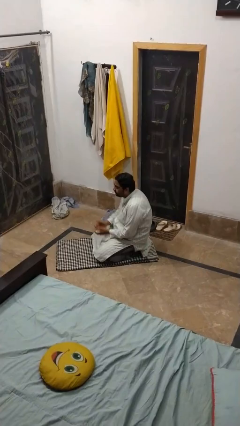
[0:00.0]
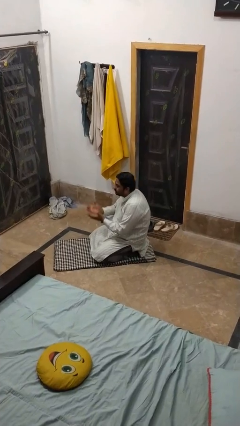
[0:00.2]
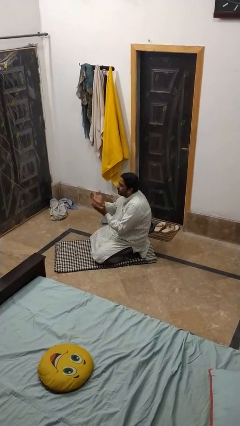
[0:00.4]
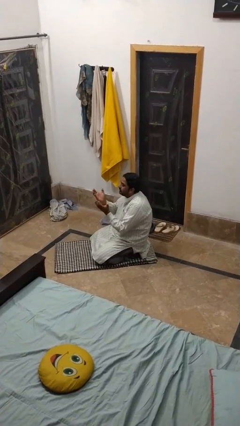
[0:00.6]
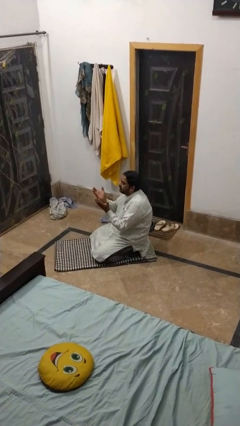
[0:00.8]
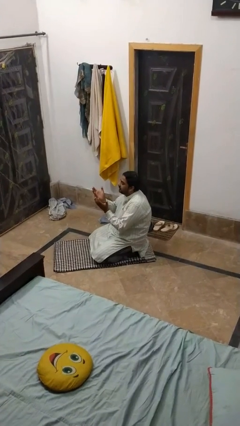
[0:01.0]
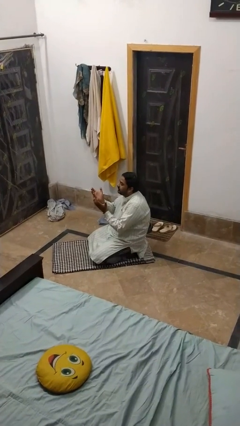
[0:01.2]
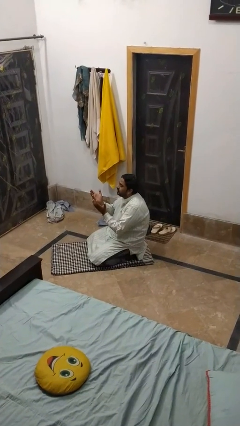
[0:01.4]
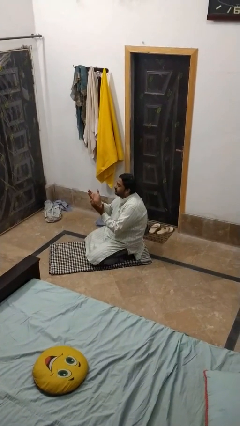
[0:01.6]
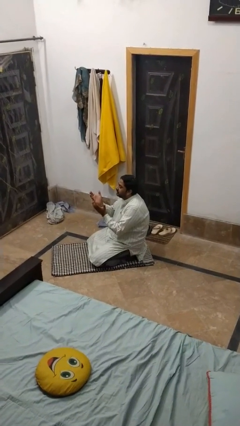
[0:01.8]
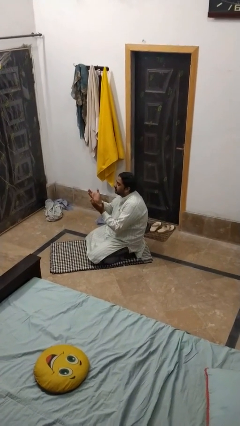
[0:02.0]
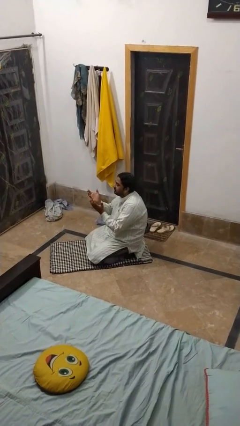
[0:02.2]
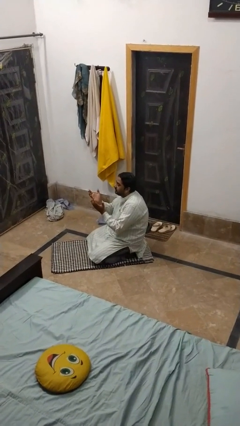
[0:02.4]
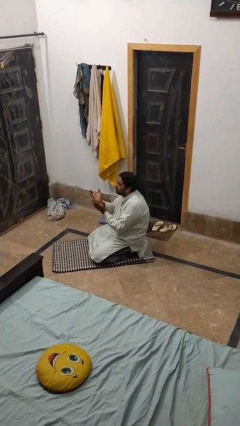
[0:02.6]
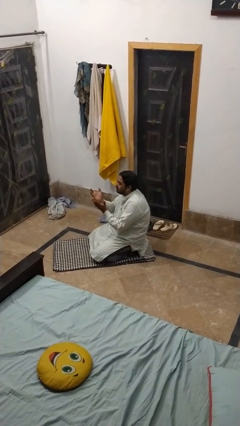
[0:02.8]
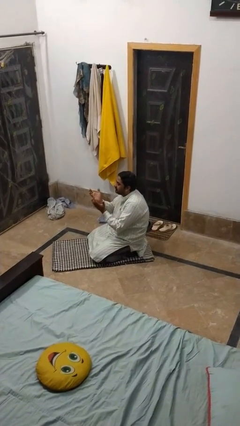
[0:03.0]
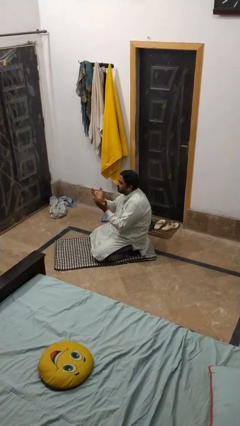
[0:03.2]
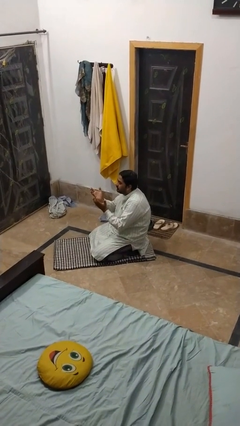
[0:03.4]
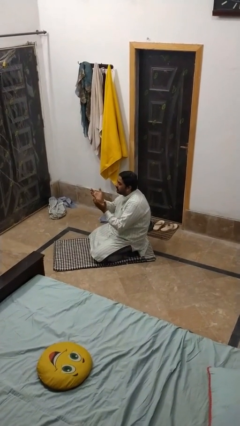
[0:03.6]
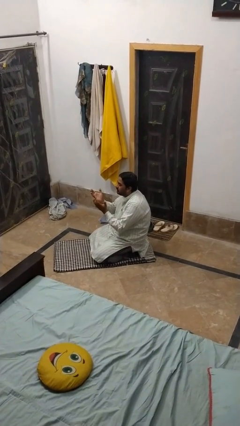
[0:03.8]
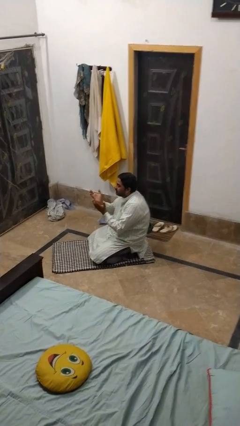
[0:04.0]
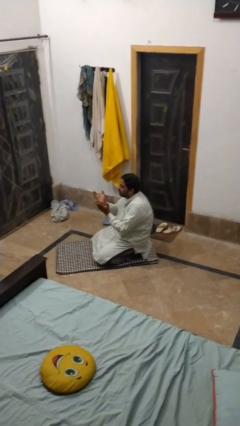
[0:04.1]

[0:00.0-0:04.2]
person prays

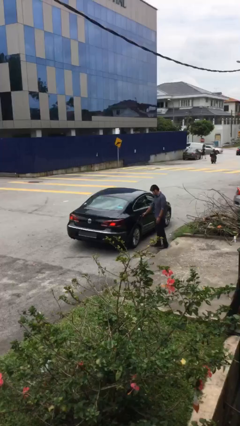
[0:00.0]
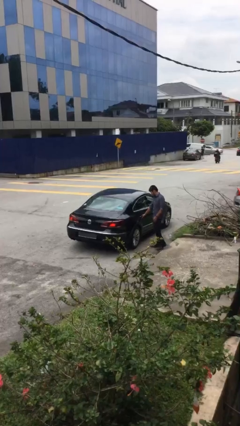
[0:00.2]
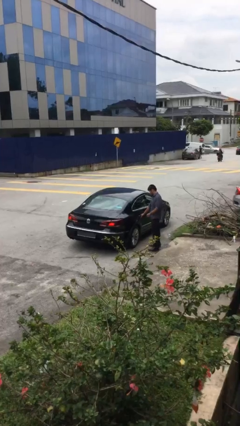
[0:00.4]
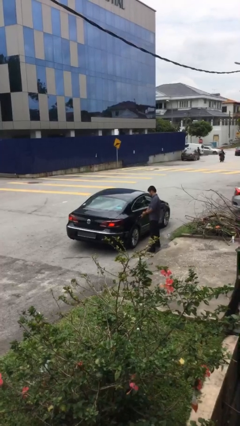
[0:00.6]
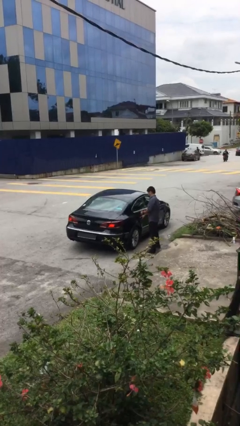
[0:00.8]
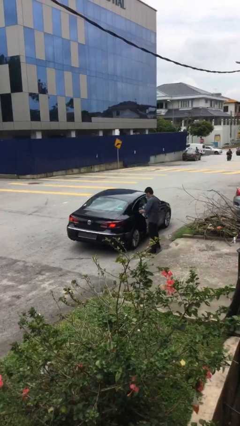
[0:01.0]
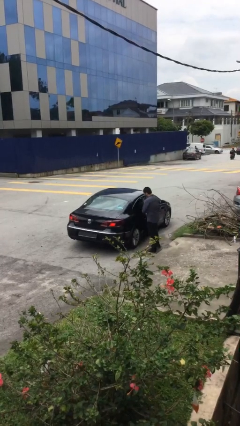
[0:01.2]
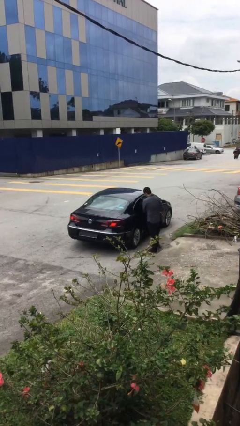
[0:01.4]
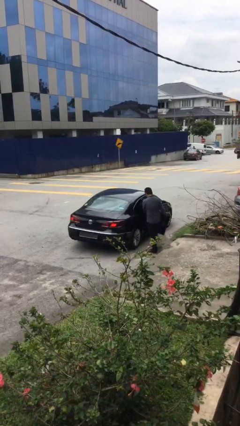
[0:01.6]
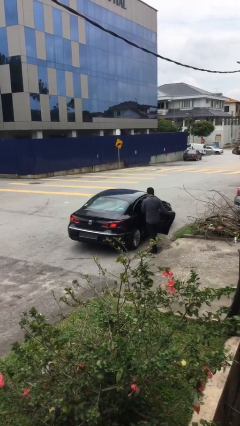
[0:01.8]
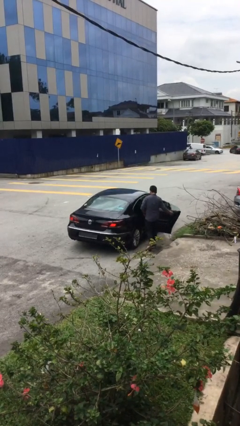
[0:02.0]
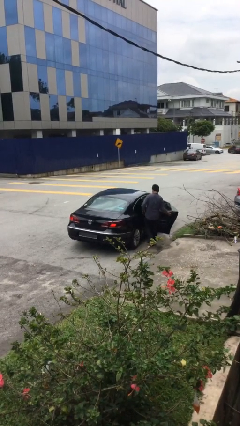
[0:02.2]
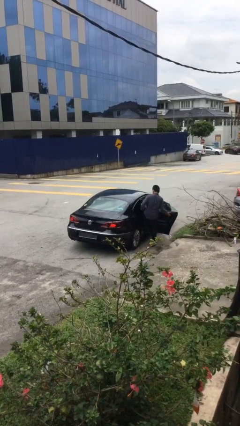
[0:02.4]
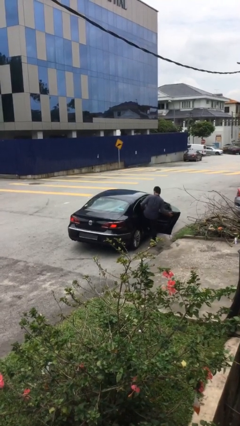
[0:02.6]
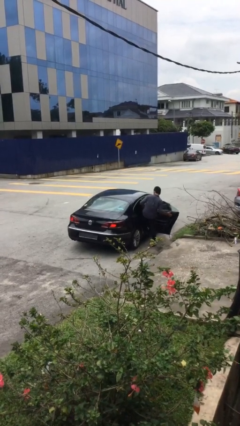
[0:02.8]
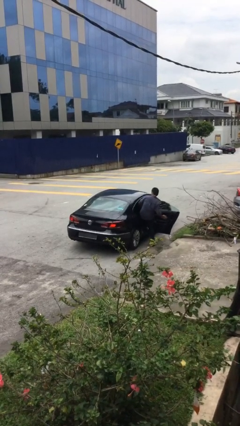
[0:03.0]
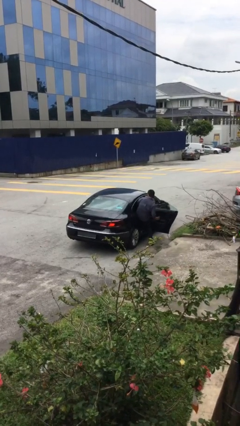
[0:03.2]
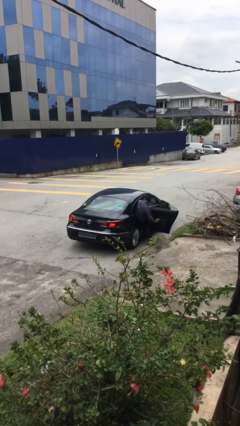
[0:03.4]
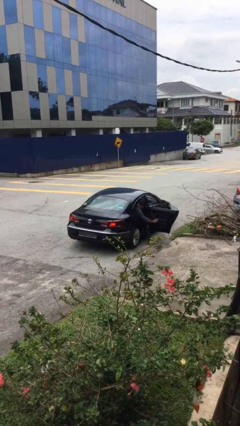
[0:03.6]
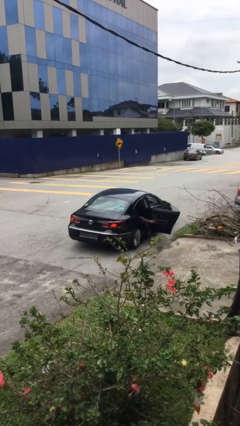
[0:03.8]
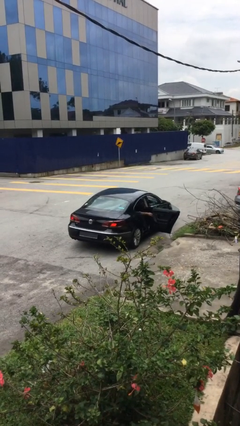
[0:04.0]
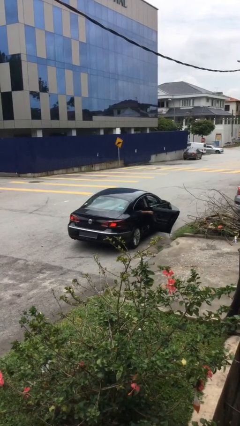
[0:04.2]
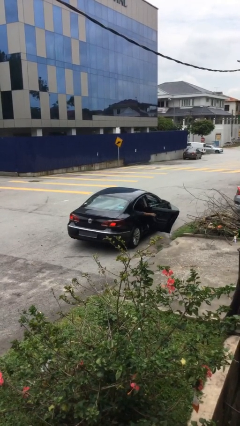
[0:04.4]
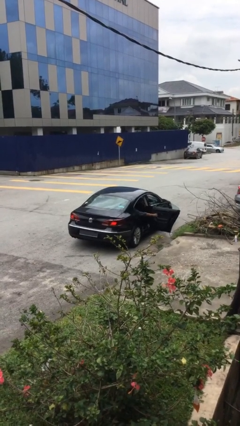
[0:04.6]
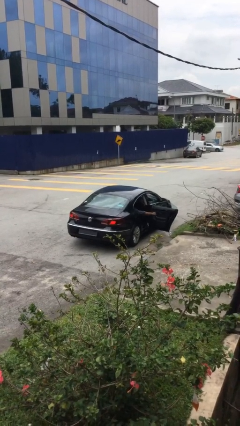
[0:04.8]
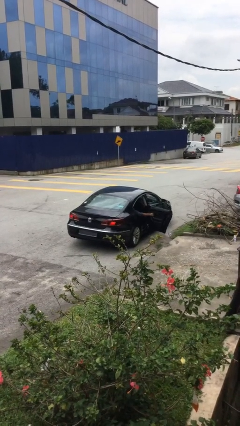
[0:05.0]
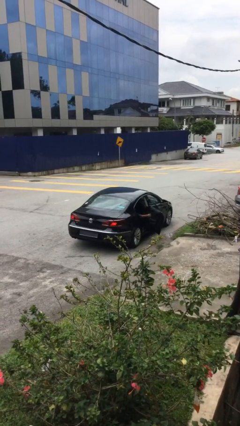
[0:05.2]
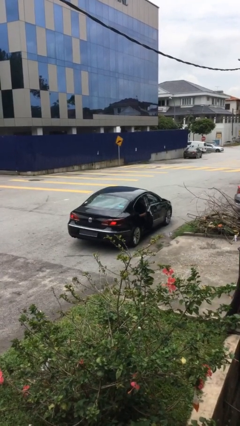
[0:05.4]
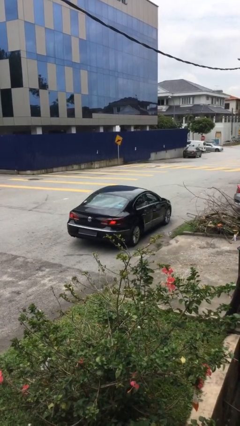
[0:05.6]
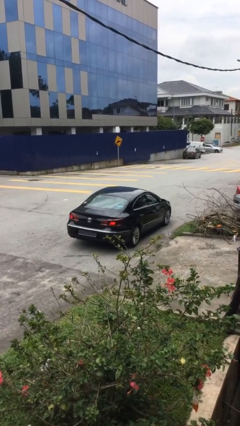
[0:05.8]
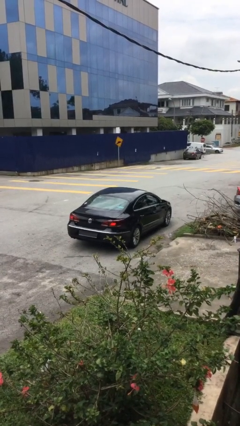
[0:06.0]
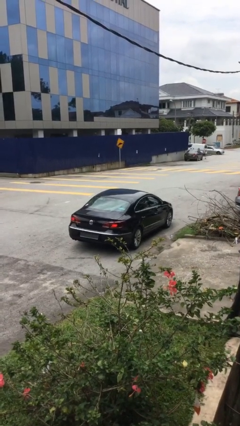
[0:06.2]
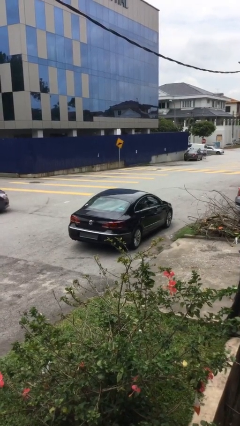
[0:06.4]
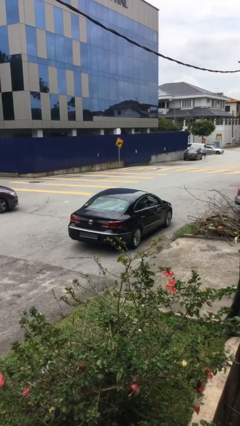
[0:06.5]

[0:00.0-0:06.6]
car picks up person

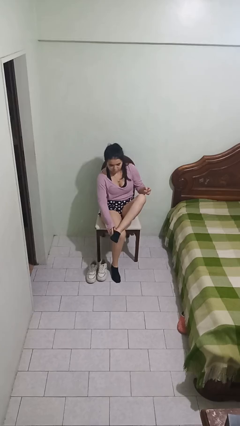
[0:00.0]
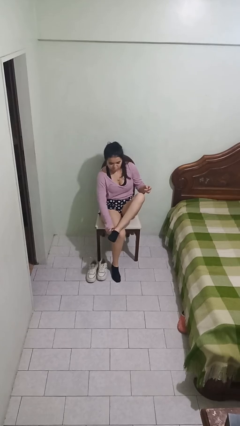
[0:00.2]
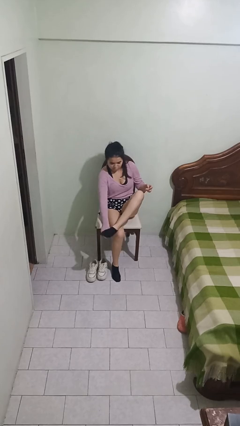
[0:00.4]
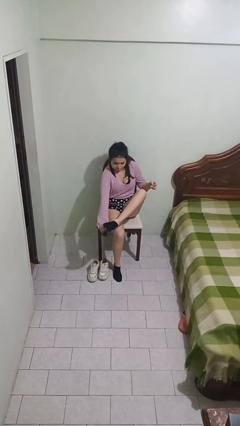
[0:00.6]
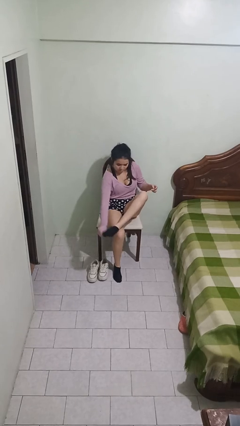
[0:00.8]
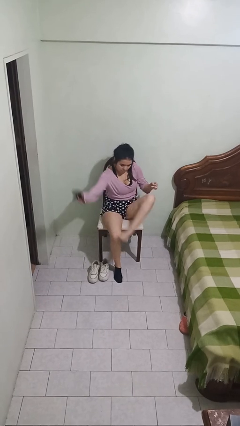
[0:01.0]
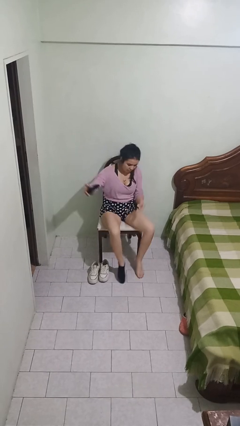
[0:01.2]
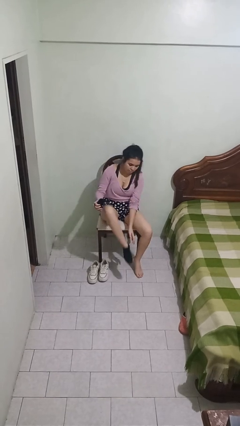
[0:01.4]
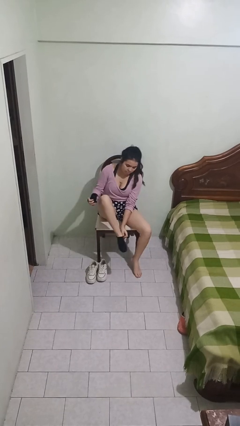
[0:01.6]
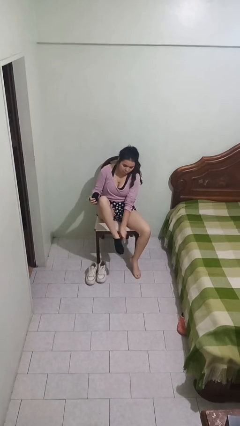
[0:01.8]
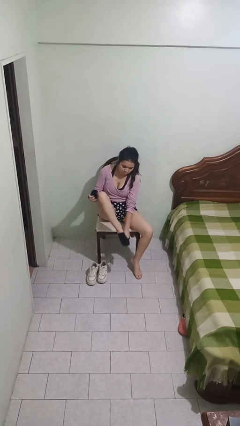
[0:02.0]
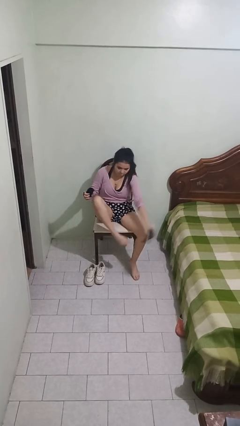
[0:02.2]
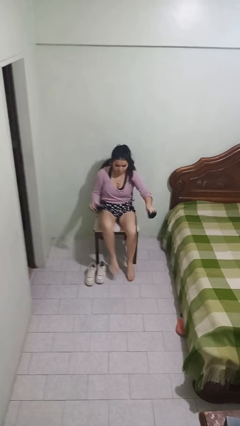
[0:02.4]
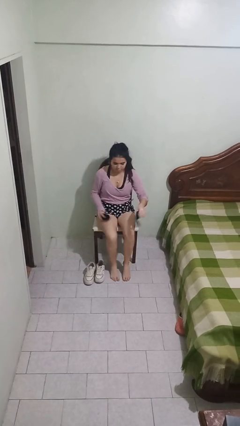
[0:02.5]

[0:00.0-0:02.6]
person takes off socks

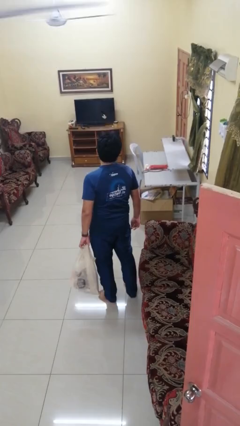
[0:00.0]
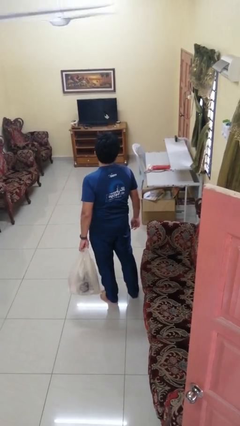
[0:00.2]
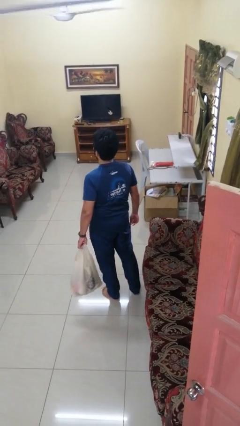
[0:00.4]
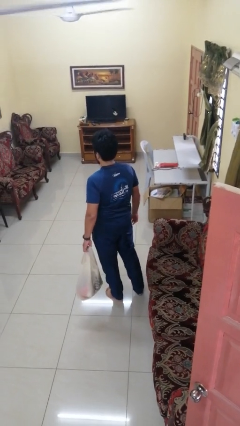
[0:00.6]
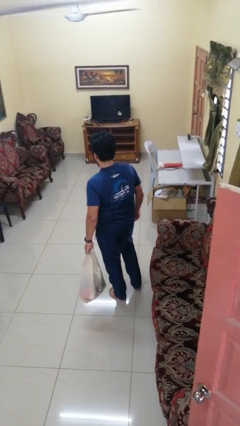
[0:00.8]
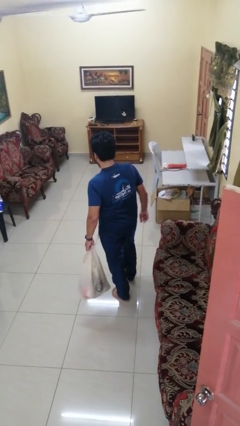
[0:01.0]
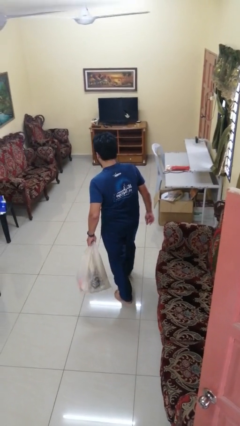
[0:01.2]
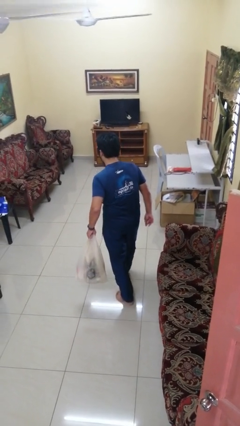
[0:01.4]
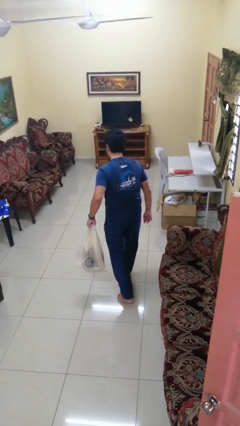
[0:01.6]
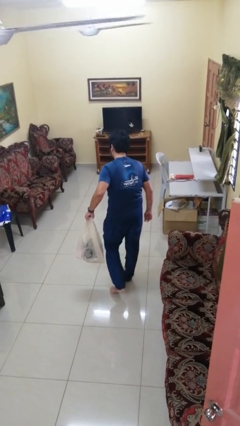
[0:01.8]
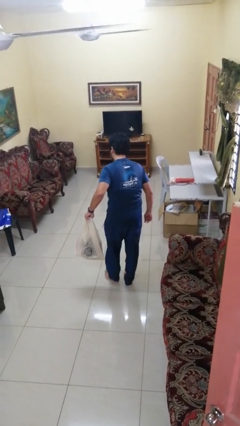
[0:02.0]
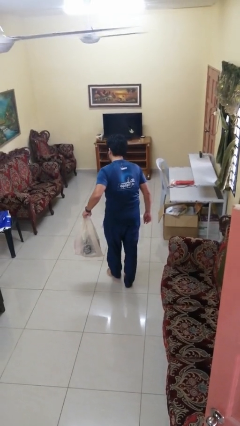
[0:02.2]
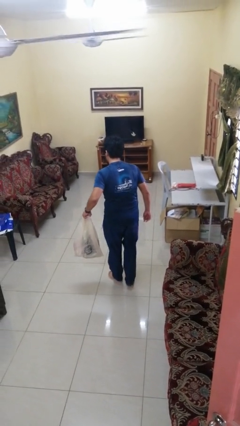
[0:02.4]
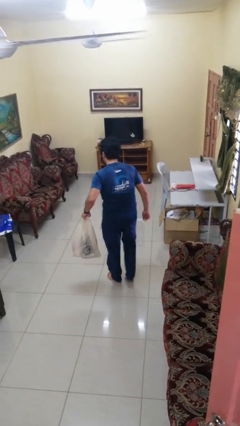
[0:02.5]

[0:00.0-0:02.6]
person carries groceries

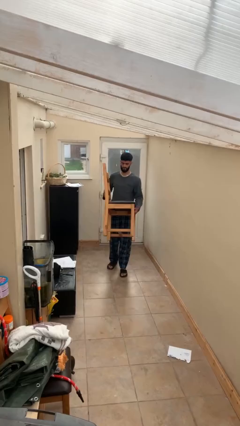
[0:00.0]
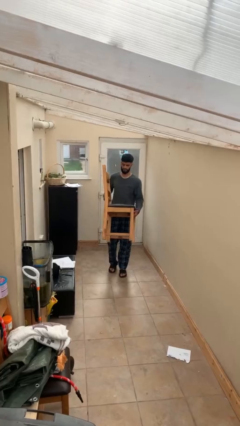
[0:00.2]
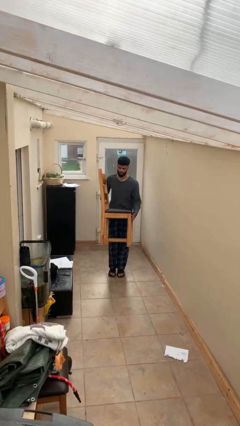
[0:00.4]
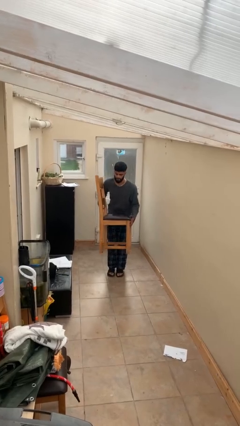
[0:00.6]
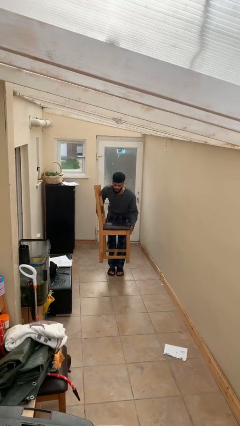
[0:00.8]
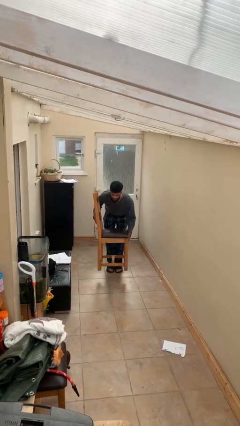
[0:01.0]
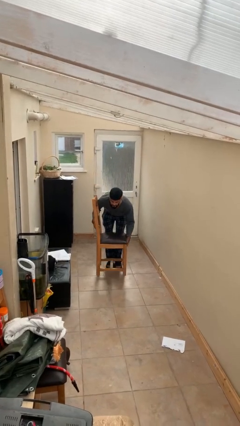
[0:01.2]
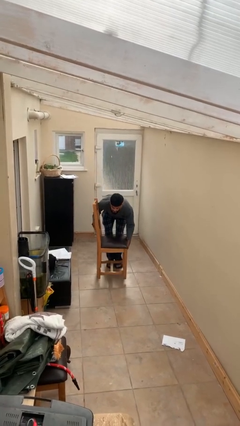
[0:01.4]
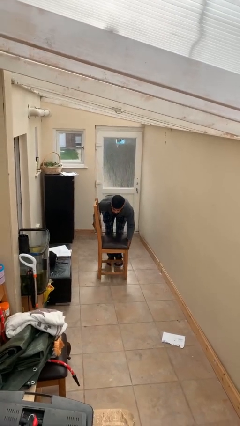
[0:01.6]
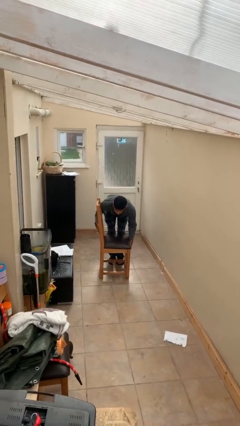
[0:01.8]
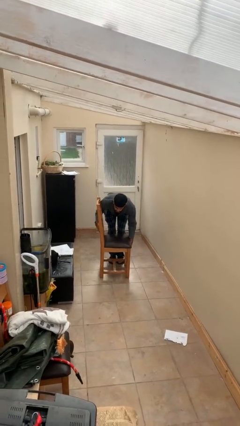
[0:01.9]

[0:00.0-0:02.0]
person puts down object on floor
